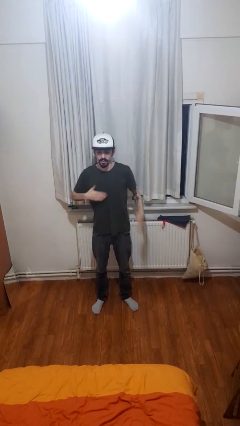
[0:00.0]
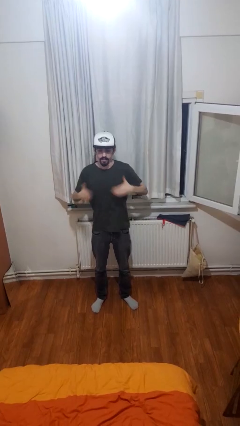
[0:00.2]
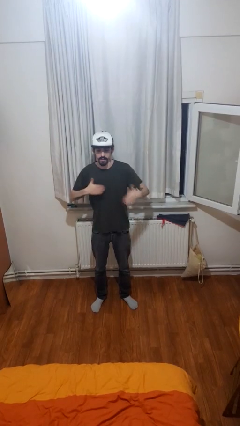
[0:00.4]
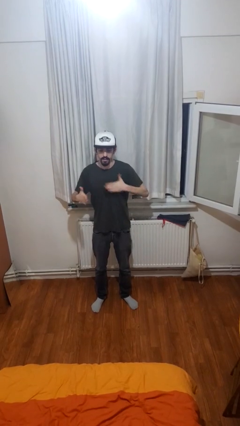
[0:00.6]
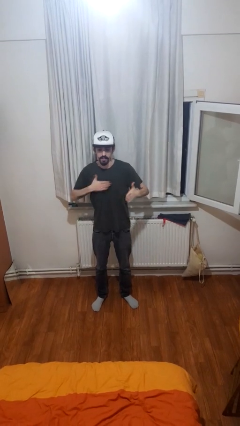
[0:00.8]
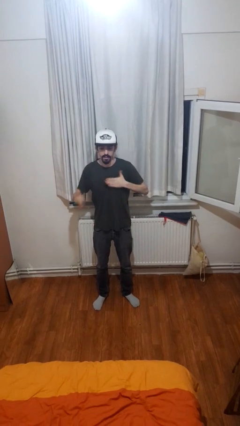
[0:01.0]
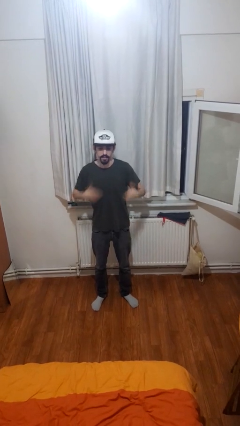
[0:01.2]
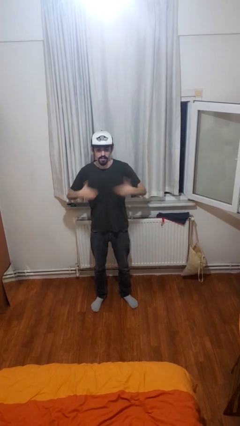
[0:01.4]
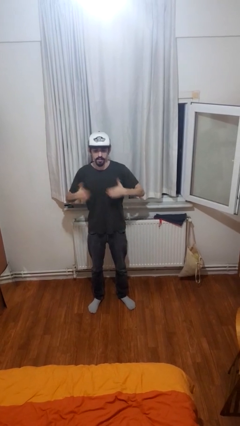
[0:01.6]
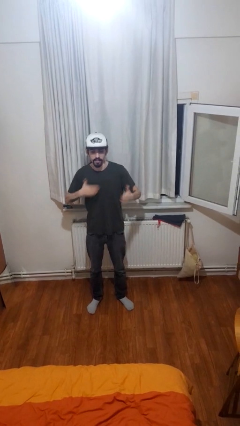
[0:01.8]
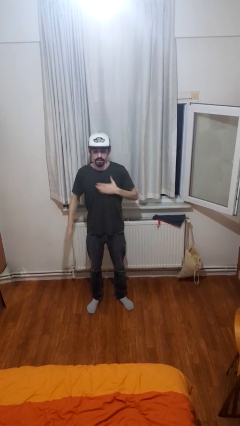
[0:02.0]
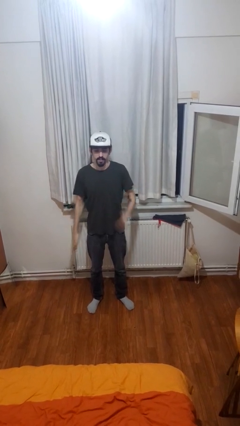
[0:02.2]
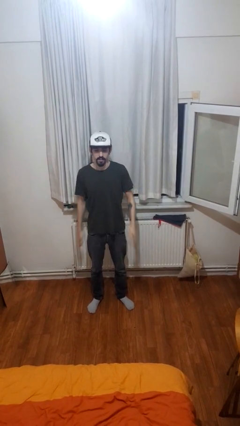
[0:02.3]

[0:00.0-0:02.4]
person drums on chest

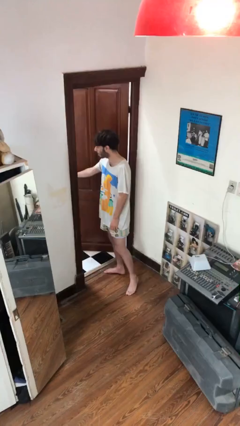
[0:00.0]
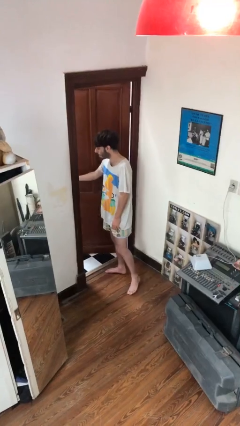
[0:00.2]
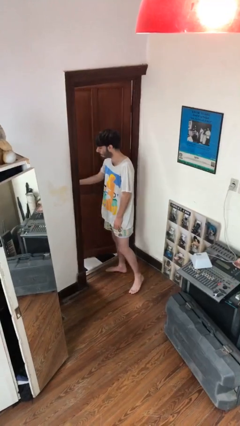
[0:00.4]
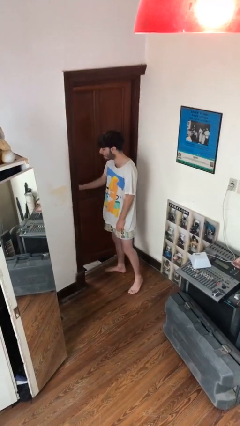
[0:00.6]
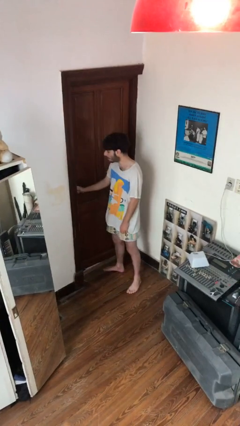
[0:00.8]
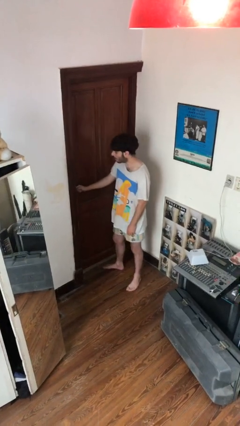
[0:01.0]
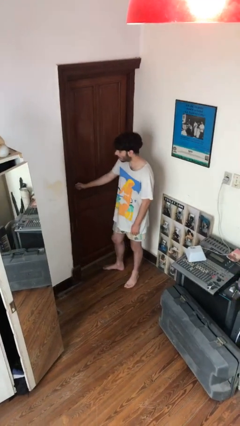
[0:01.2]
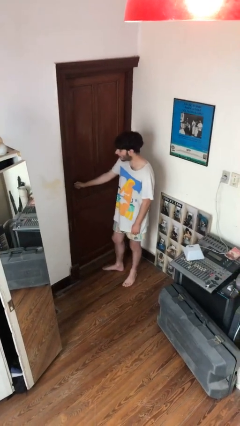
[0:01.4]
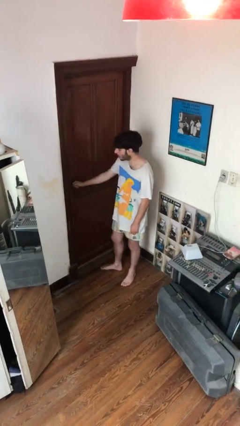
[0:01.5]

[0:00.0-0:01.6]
person closes facility door

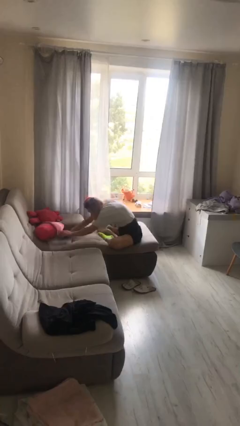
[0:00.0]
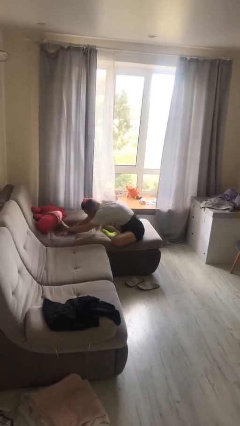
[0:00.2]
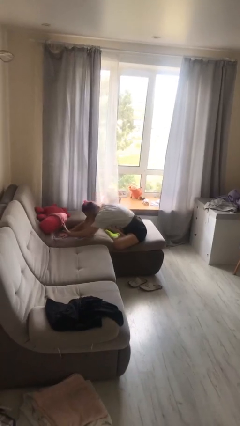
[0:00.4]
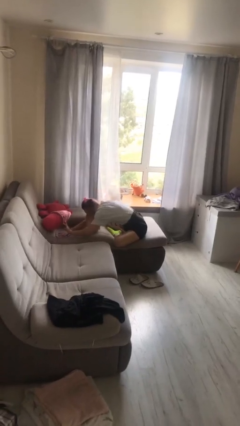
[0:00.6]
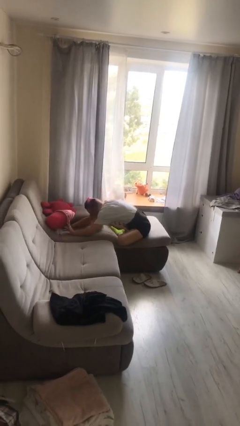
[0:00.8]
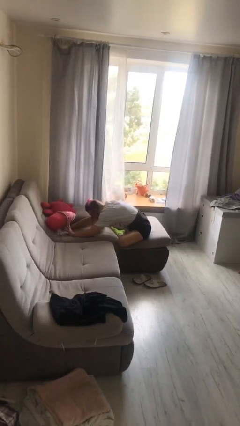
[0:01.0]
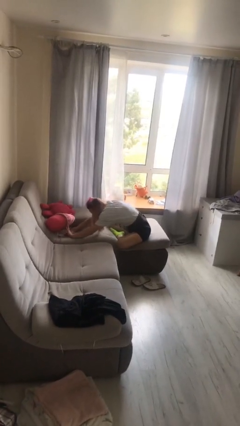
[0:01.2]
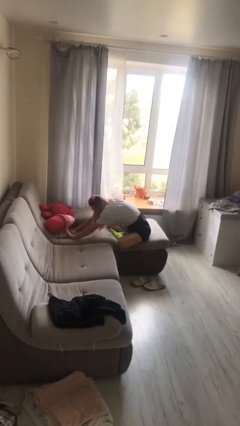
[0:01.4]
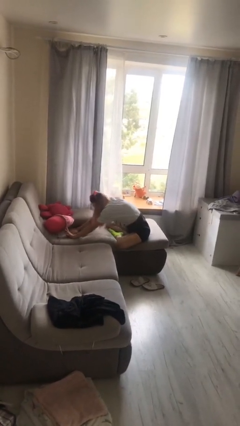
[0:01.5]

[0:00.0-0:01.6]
person searches in couch

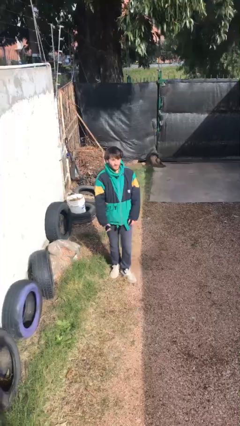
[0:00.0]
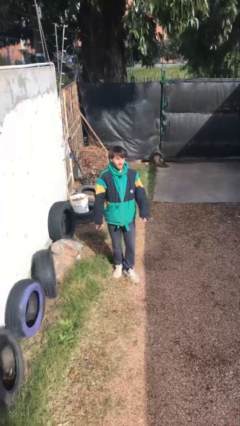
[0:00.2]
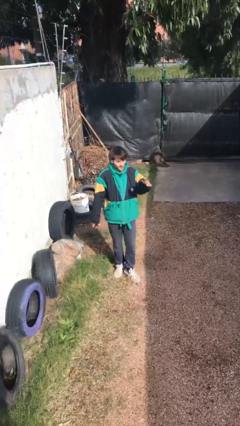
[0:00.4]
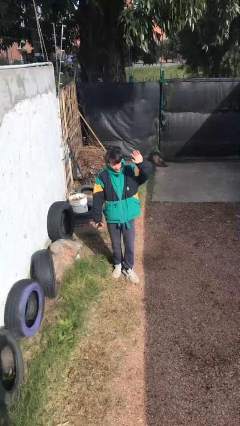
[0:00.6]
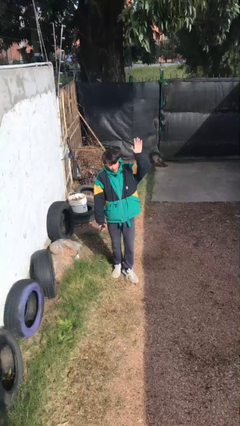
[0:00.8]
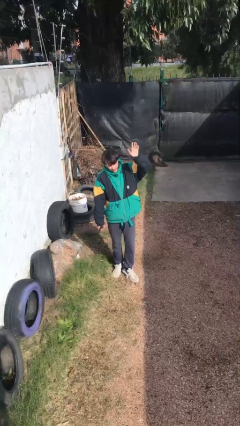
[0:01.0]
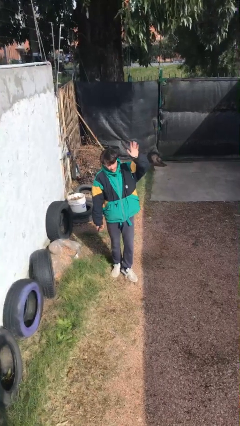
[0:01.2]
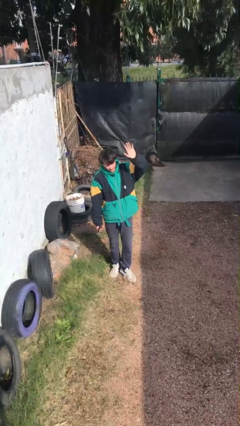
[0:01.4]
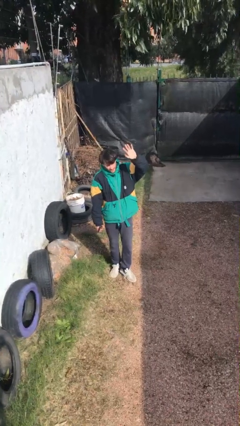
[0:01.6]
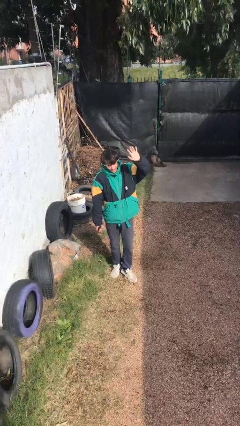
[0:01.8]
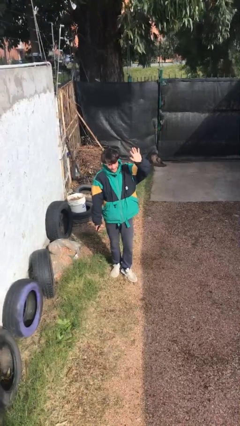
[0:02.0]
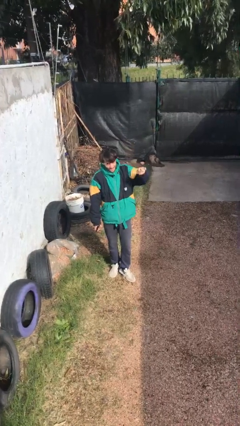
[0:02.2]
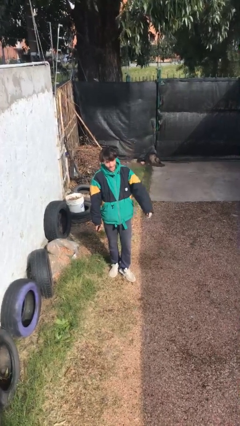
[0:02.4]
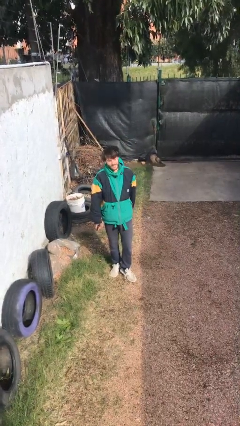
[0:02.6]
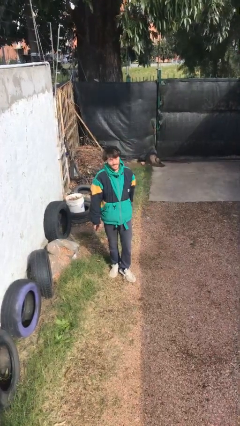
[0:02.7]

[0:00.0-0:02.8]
person waves at person

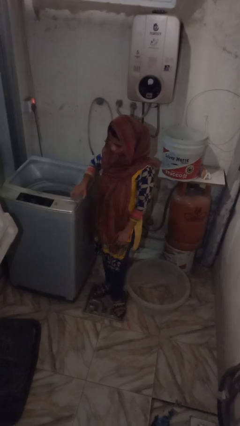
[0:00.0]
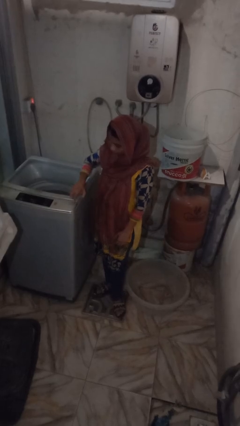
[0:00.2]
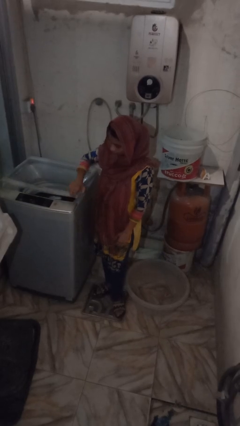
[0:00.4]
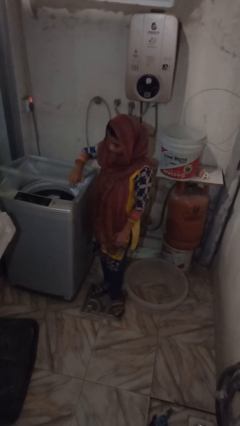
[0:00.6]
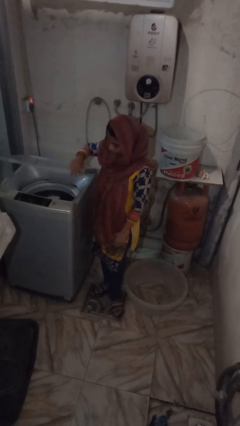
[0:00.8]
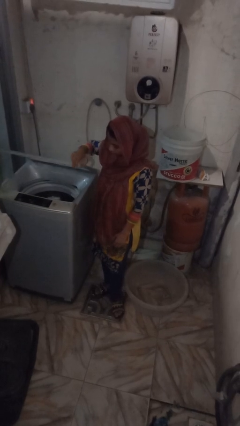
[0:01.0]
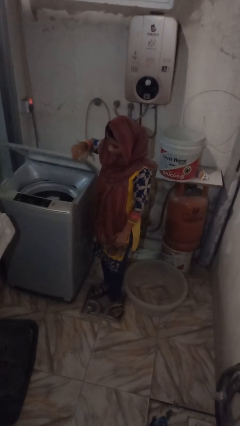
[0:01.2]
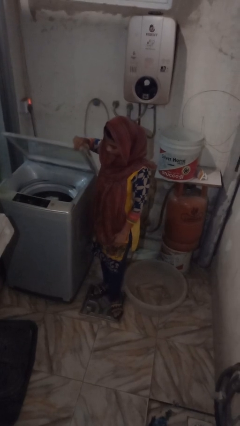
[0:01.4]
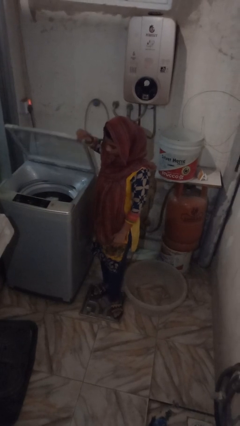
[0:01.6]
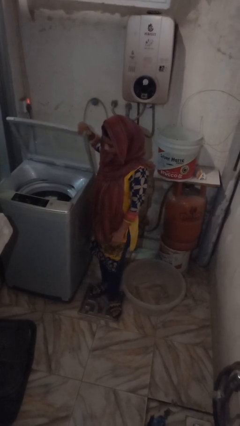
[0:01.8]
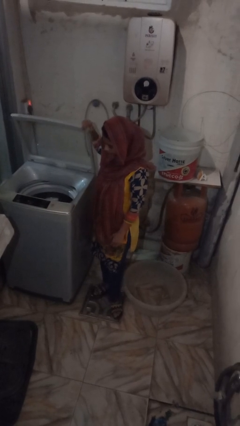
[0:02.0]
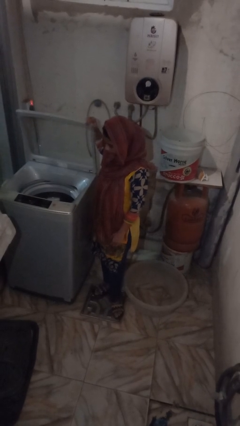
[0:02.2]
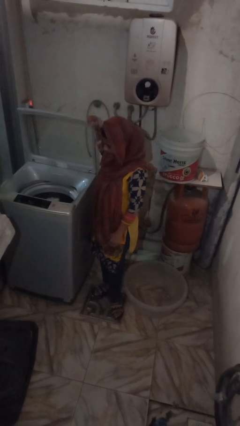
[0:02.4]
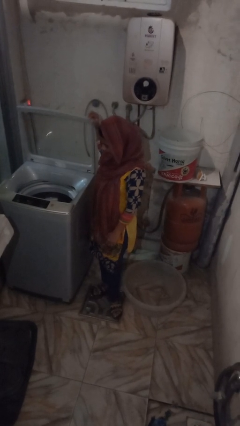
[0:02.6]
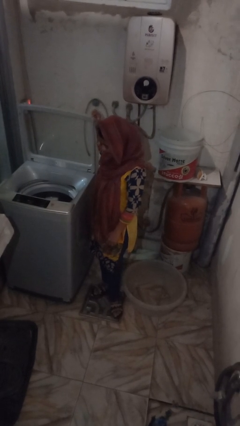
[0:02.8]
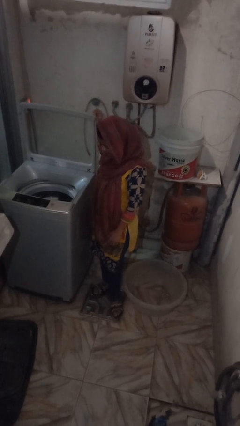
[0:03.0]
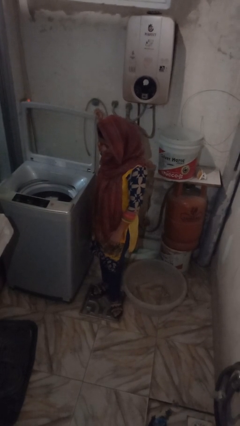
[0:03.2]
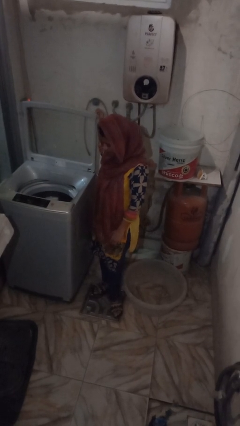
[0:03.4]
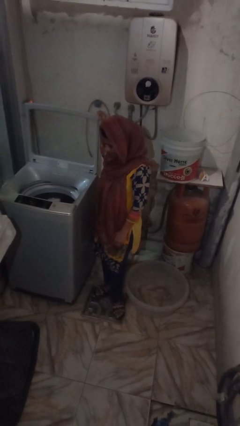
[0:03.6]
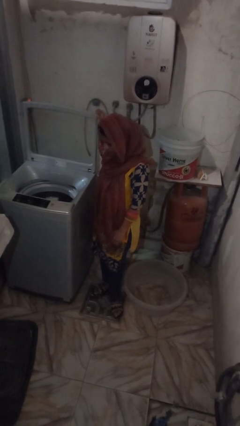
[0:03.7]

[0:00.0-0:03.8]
person opens clothes washer

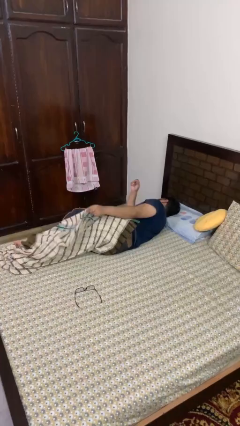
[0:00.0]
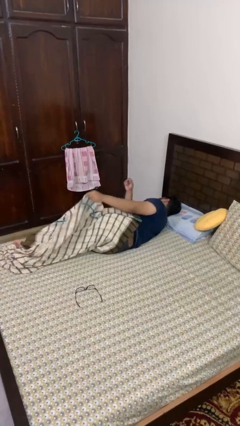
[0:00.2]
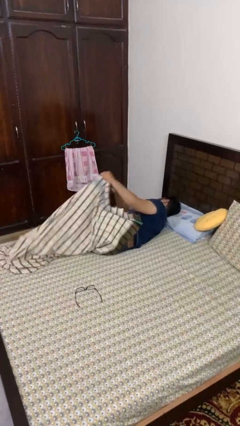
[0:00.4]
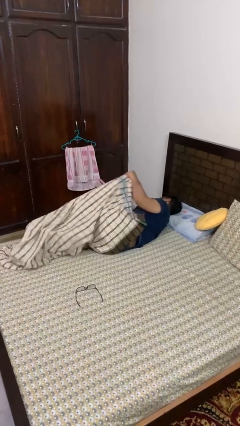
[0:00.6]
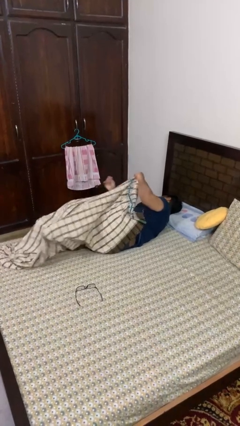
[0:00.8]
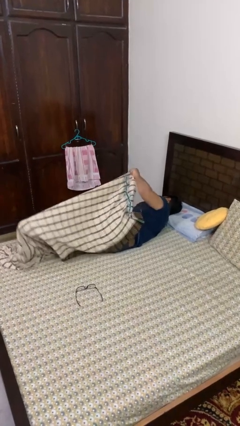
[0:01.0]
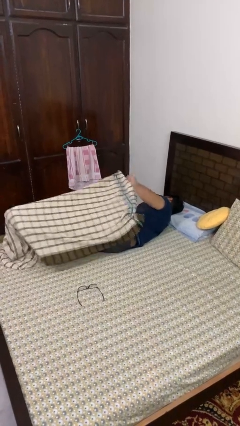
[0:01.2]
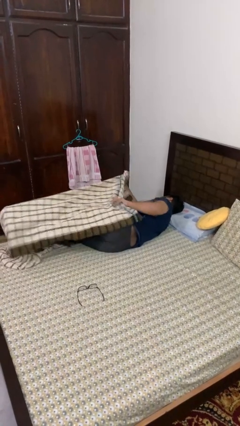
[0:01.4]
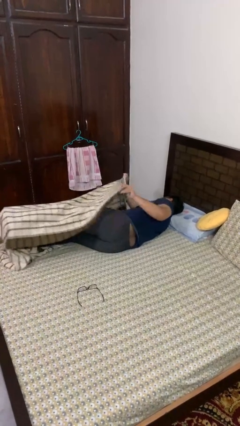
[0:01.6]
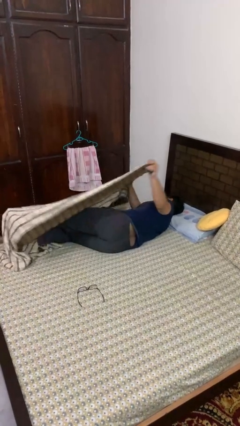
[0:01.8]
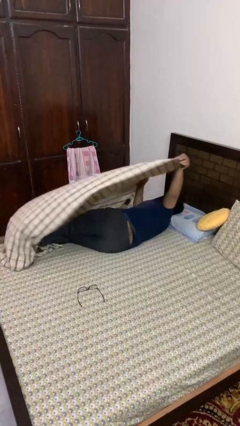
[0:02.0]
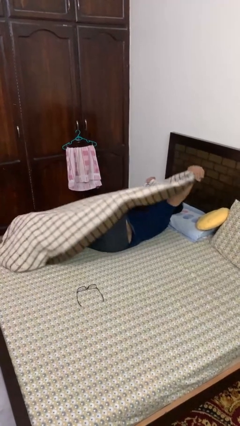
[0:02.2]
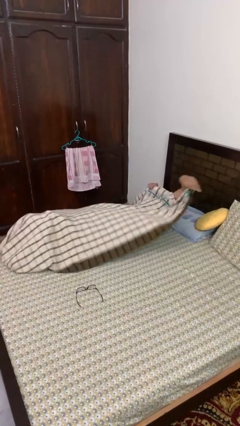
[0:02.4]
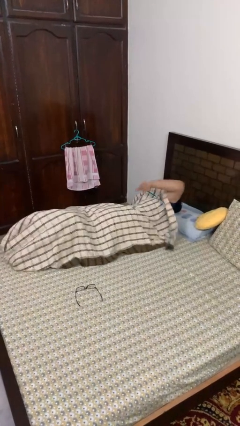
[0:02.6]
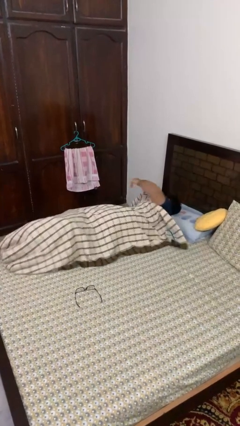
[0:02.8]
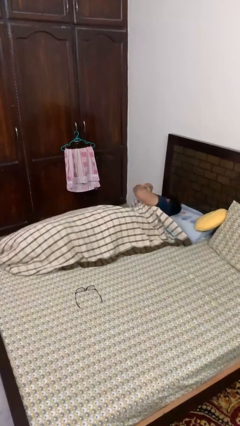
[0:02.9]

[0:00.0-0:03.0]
person covers with bedsheets

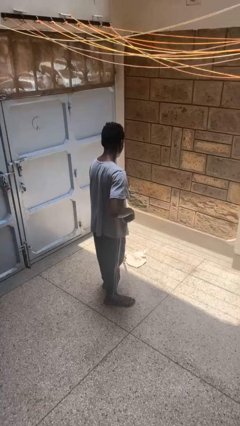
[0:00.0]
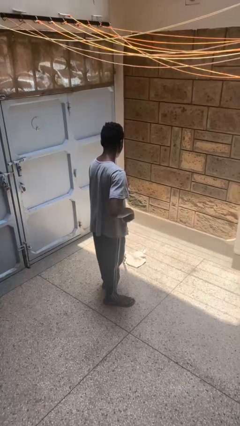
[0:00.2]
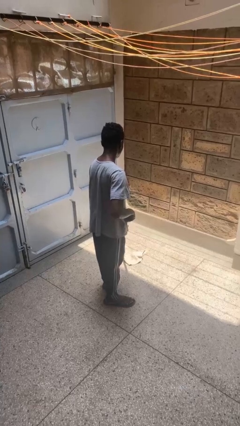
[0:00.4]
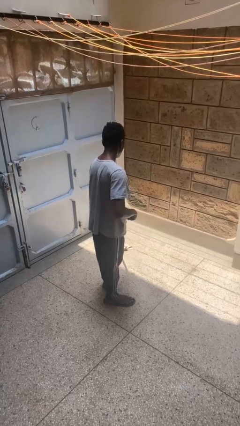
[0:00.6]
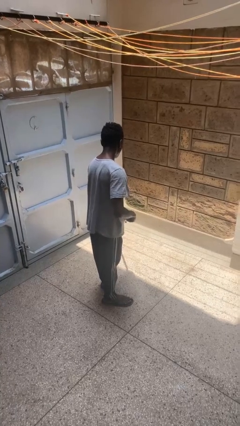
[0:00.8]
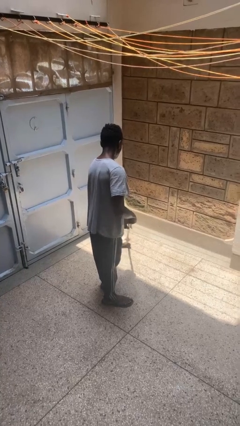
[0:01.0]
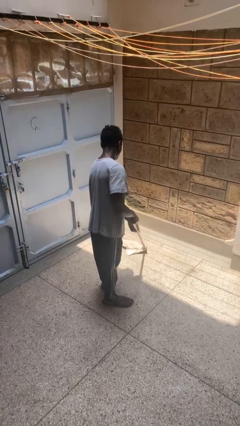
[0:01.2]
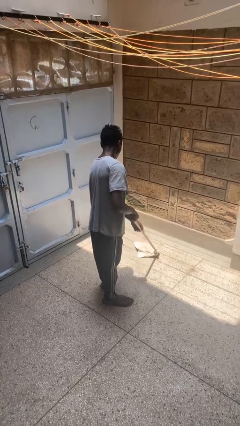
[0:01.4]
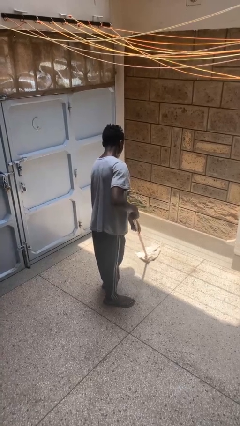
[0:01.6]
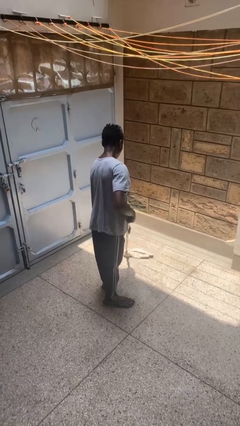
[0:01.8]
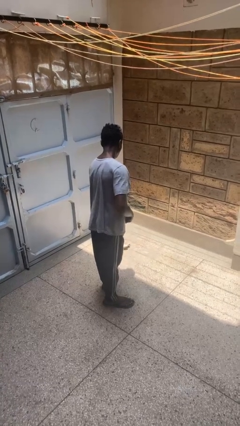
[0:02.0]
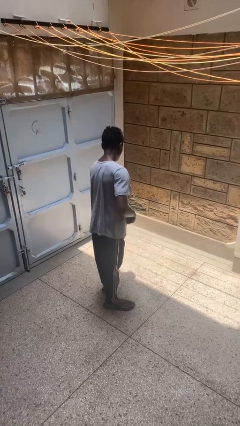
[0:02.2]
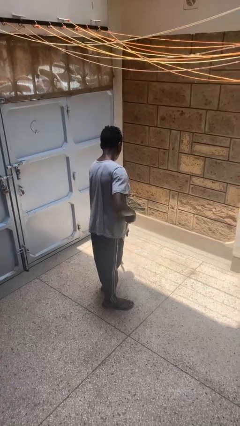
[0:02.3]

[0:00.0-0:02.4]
person mops
